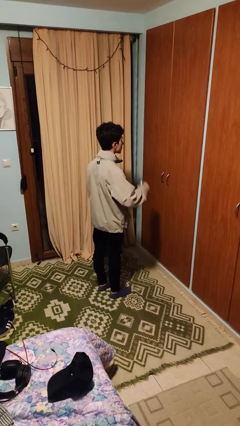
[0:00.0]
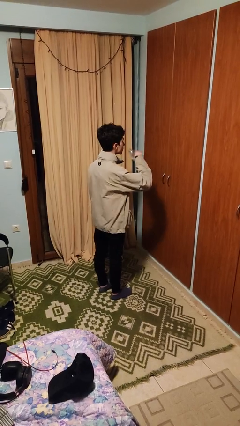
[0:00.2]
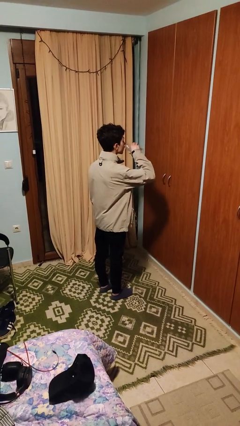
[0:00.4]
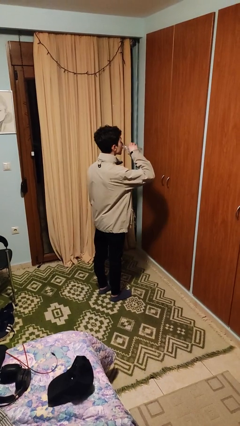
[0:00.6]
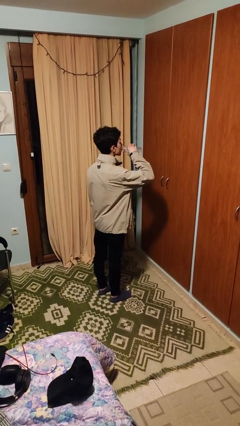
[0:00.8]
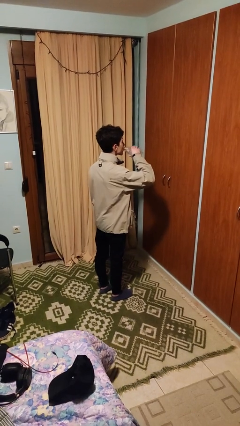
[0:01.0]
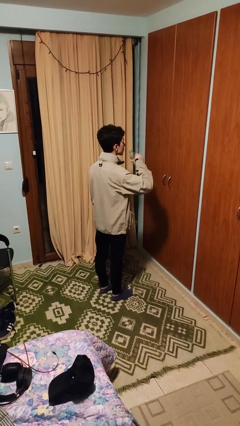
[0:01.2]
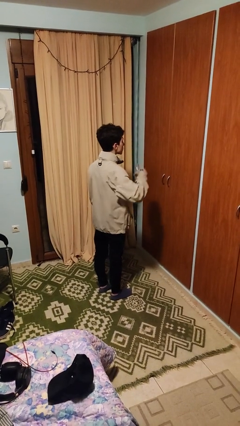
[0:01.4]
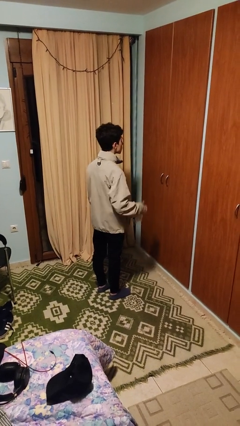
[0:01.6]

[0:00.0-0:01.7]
person drinks from bottle

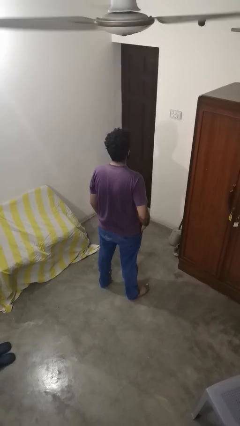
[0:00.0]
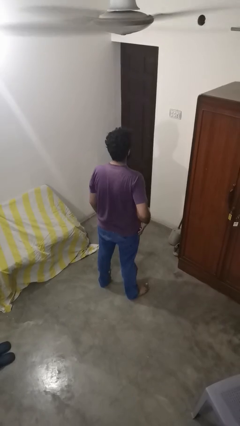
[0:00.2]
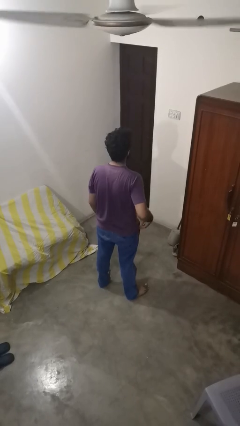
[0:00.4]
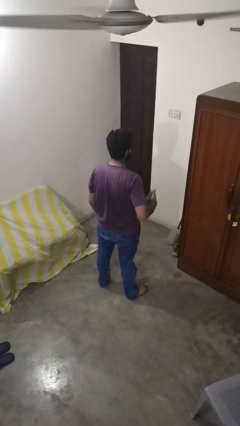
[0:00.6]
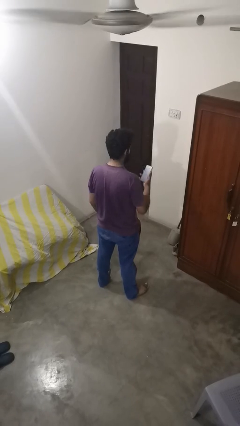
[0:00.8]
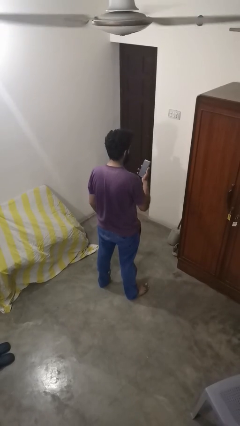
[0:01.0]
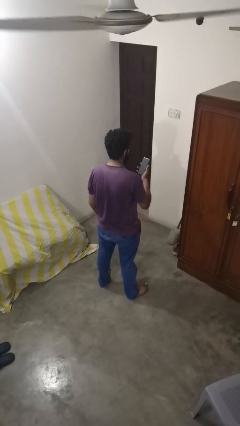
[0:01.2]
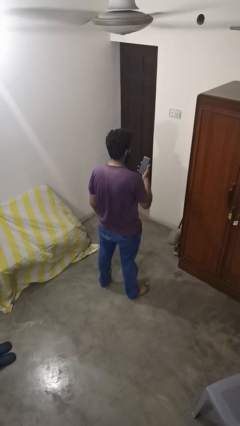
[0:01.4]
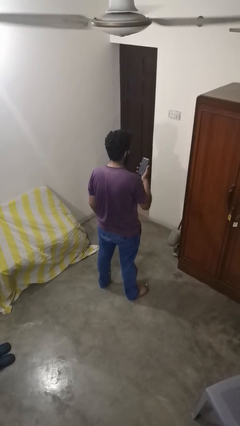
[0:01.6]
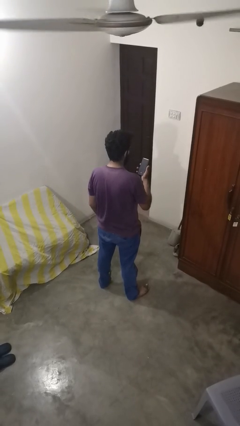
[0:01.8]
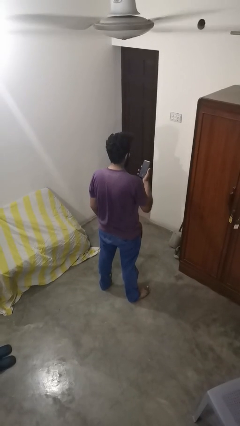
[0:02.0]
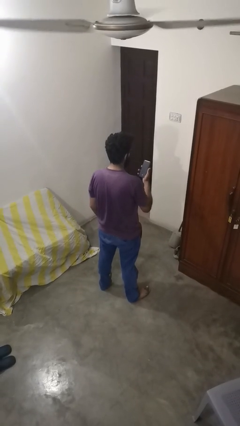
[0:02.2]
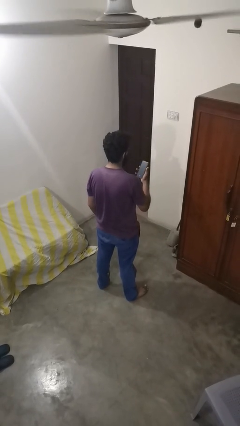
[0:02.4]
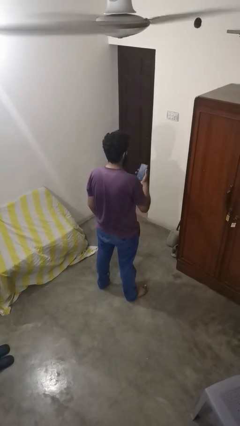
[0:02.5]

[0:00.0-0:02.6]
person takes phone from pocket

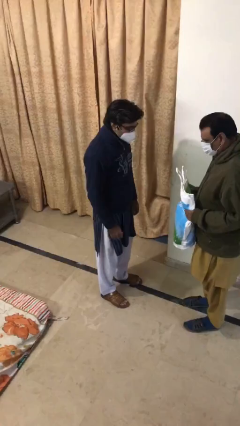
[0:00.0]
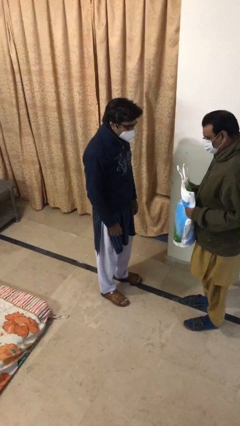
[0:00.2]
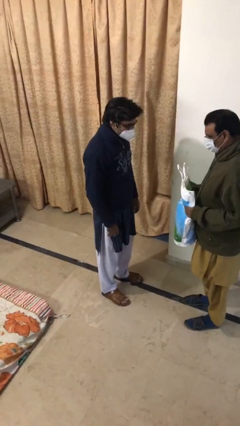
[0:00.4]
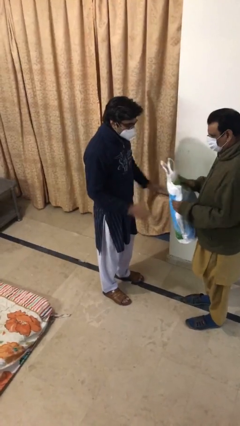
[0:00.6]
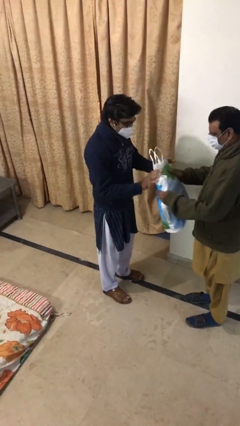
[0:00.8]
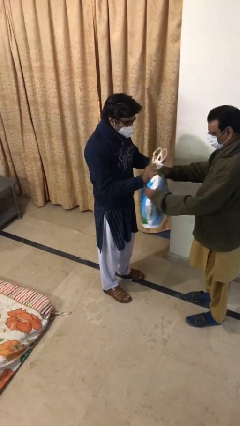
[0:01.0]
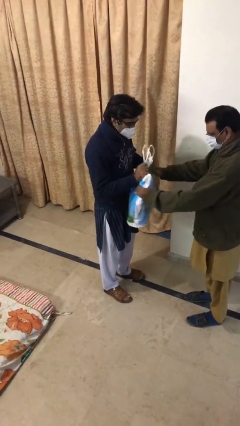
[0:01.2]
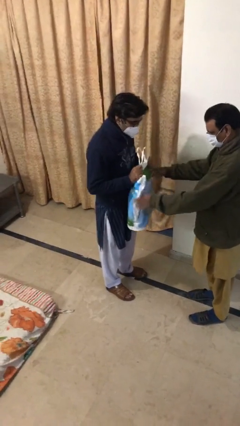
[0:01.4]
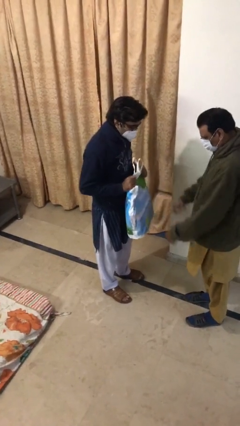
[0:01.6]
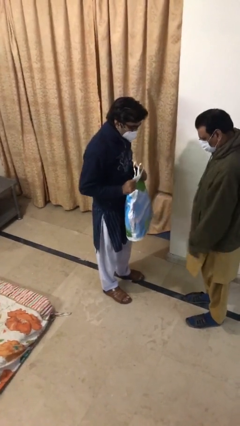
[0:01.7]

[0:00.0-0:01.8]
person transfers object to person

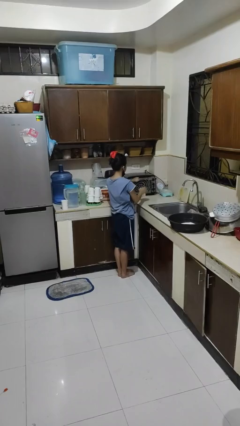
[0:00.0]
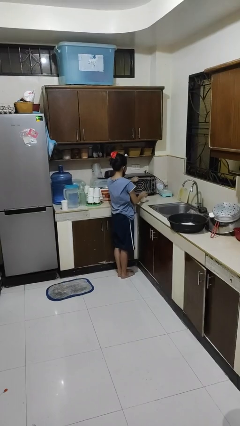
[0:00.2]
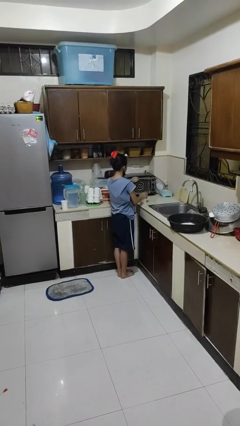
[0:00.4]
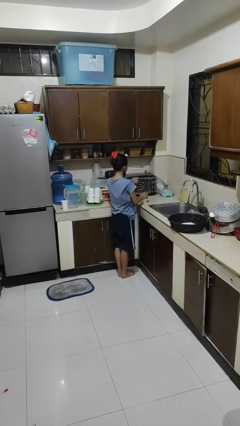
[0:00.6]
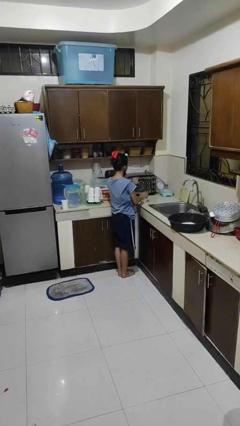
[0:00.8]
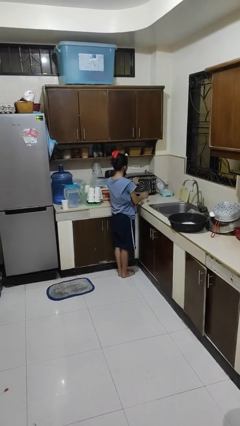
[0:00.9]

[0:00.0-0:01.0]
person closes microwave

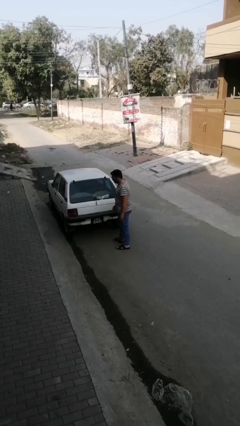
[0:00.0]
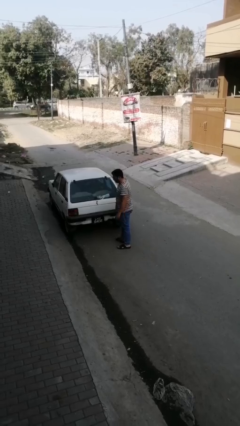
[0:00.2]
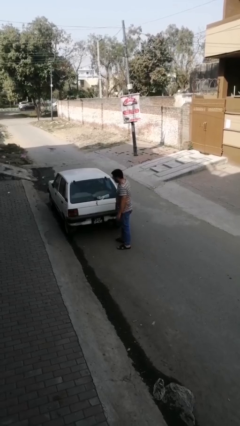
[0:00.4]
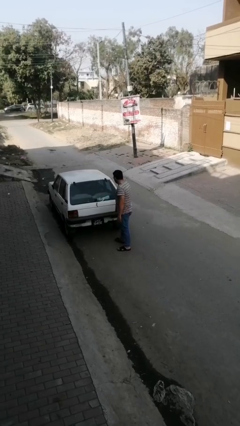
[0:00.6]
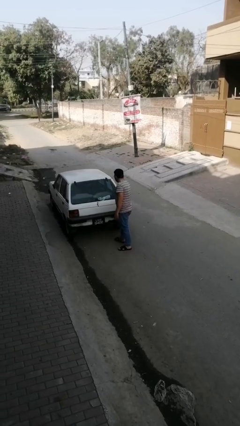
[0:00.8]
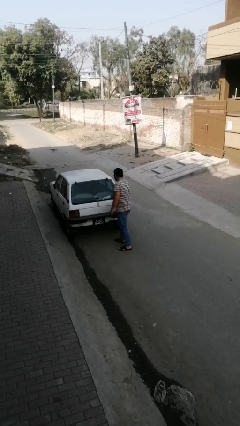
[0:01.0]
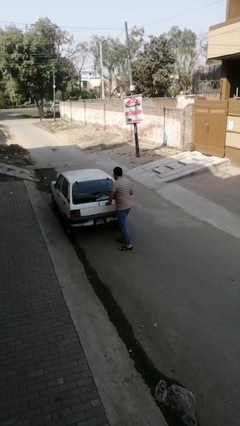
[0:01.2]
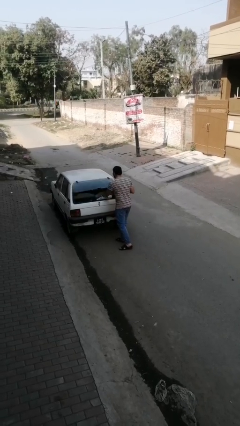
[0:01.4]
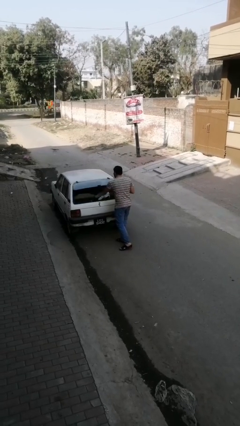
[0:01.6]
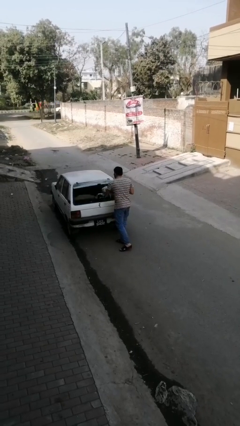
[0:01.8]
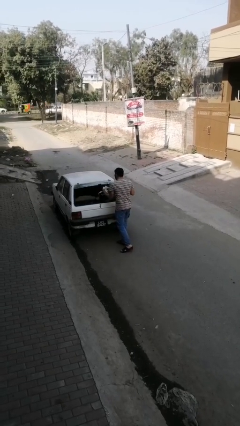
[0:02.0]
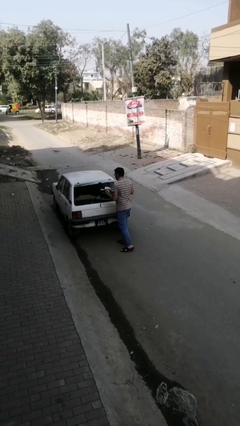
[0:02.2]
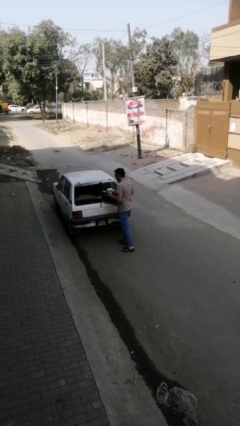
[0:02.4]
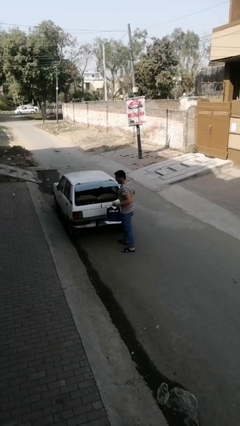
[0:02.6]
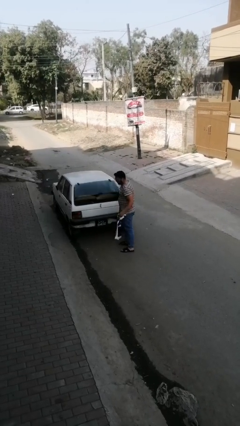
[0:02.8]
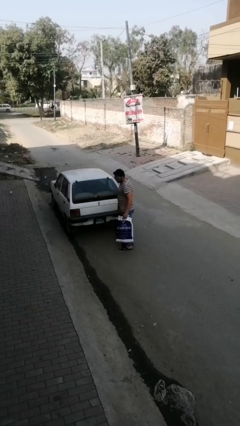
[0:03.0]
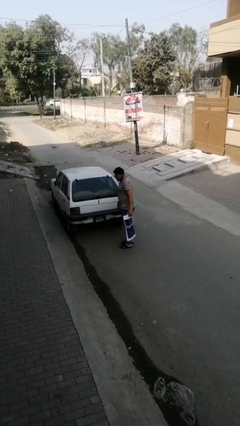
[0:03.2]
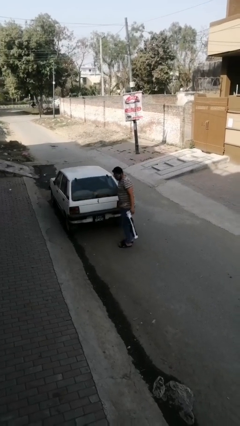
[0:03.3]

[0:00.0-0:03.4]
person unloads car

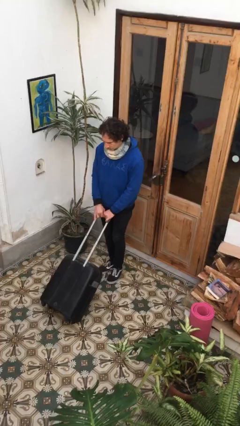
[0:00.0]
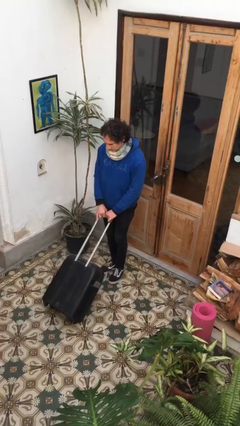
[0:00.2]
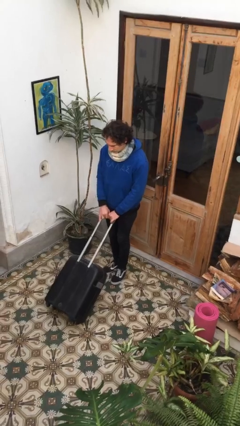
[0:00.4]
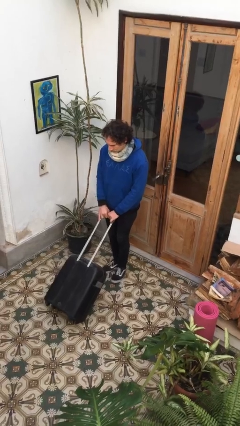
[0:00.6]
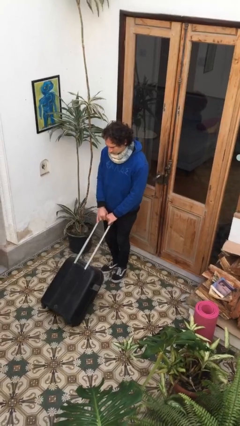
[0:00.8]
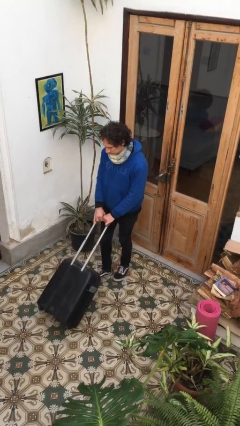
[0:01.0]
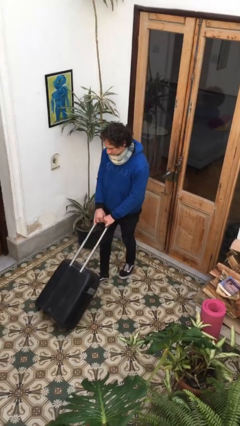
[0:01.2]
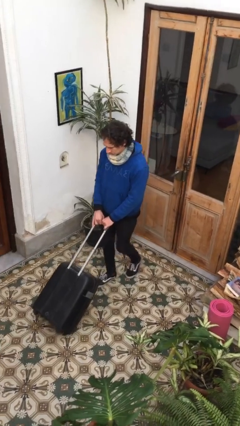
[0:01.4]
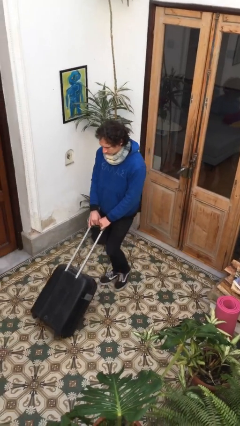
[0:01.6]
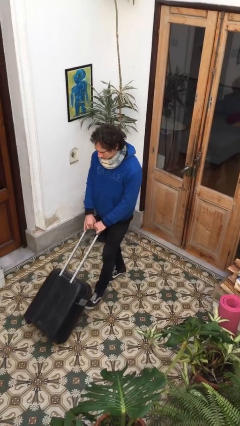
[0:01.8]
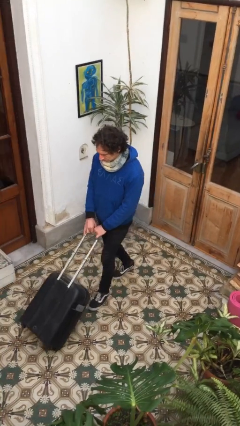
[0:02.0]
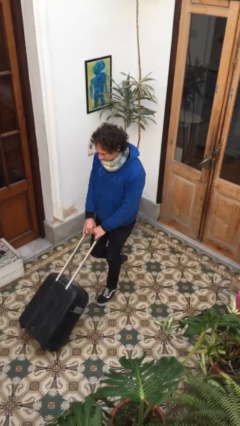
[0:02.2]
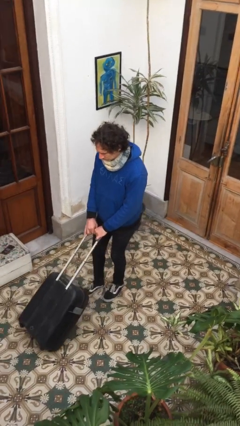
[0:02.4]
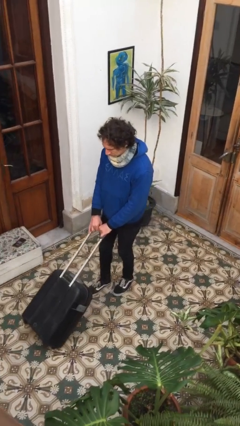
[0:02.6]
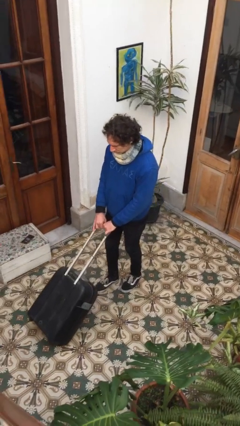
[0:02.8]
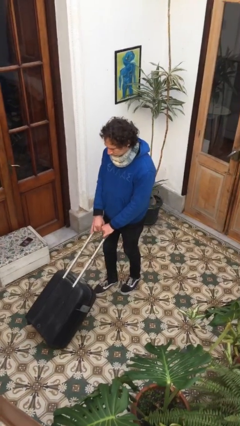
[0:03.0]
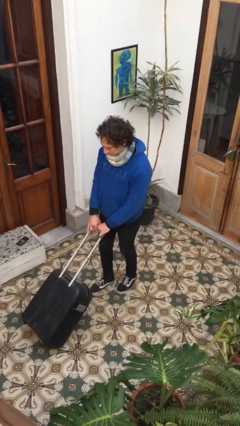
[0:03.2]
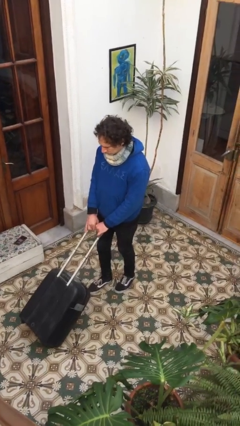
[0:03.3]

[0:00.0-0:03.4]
person pushes wheeled cart

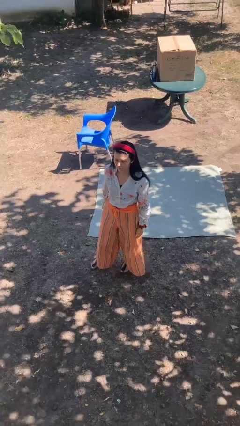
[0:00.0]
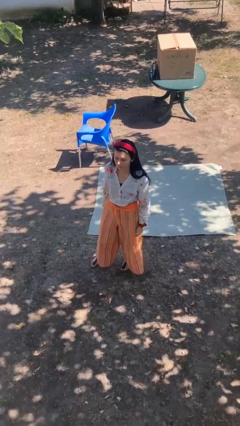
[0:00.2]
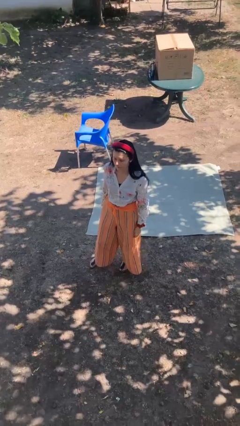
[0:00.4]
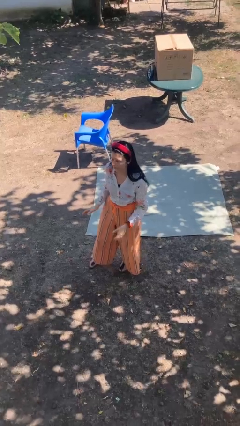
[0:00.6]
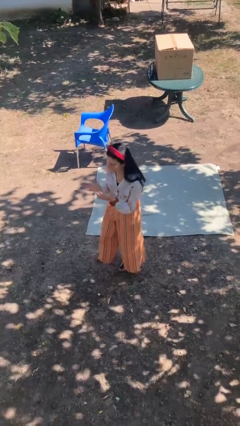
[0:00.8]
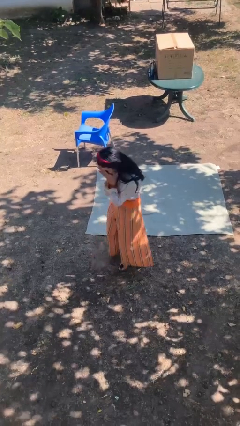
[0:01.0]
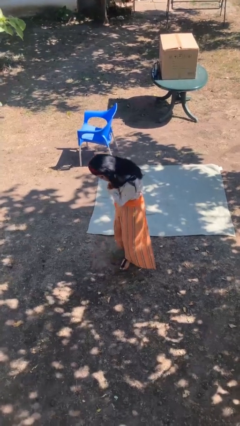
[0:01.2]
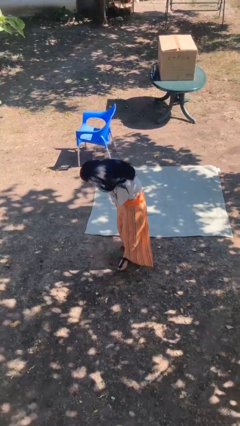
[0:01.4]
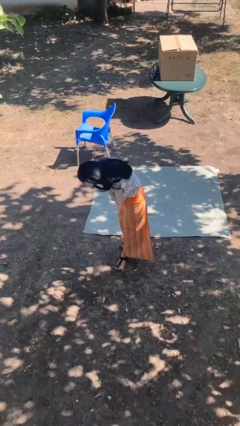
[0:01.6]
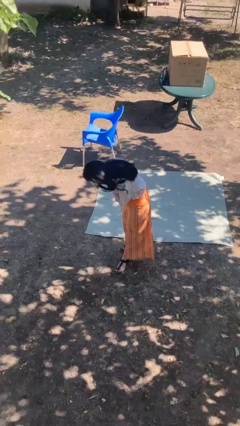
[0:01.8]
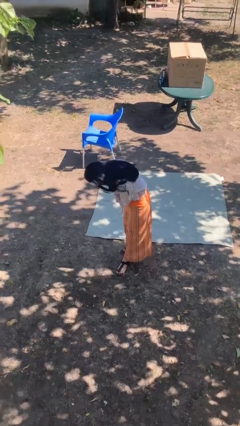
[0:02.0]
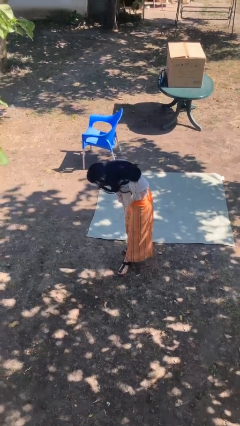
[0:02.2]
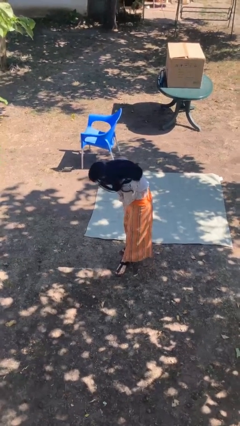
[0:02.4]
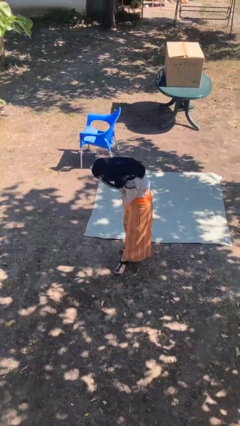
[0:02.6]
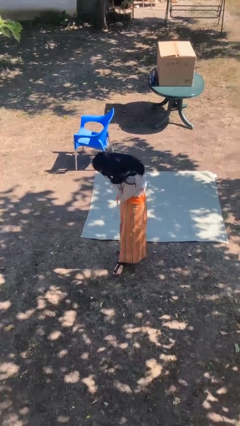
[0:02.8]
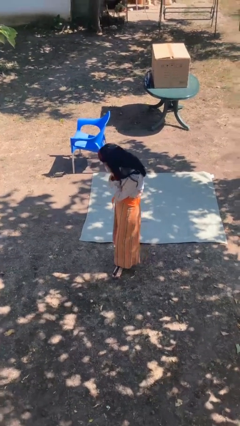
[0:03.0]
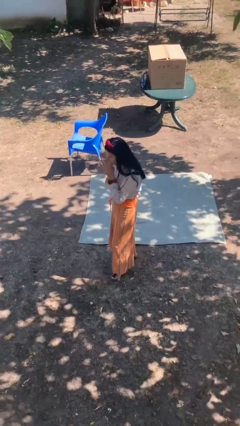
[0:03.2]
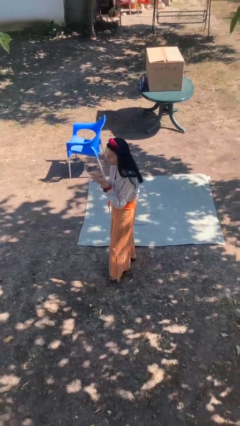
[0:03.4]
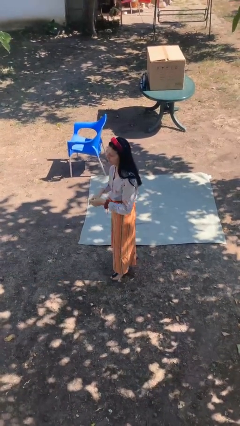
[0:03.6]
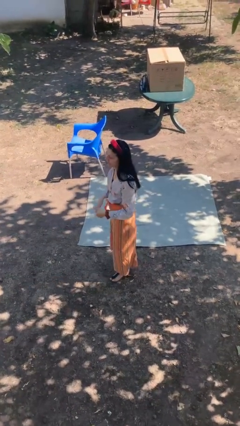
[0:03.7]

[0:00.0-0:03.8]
person covers face with hands
